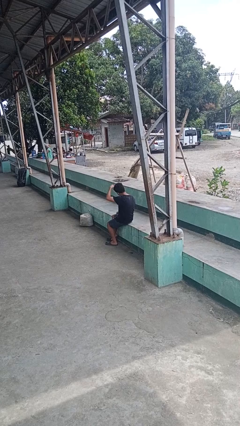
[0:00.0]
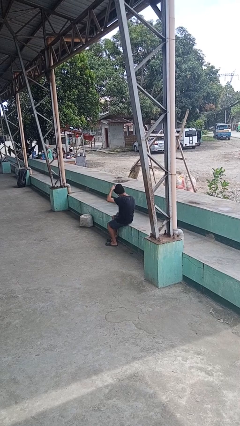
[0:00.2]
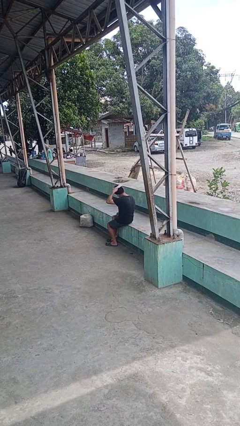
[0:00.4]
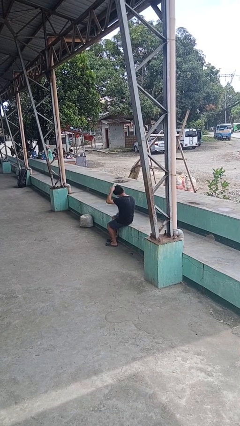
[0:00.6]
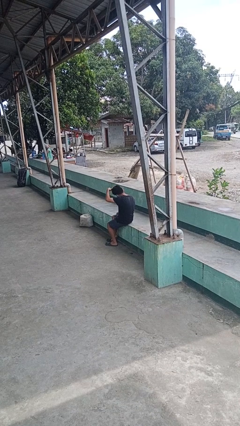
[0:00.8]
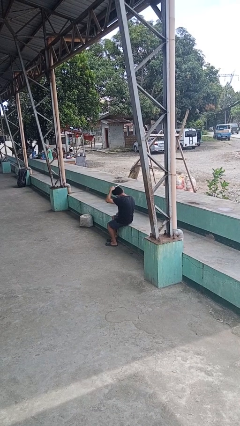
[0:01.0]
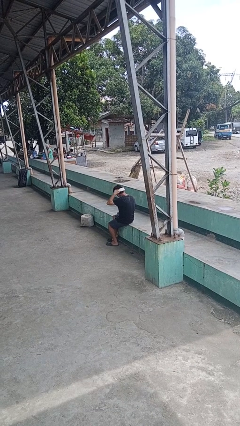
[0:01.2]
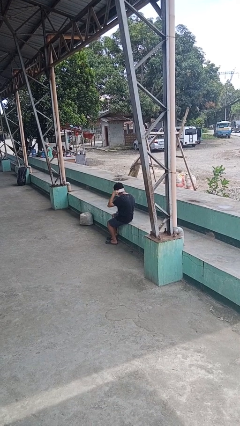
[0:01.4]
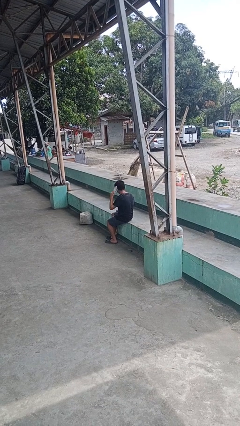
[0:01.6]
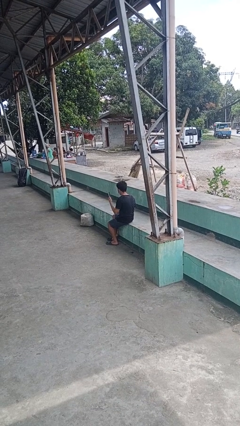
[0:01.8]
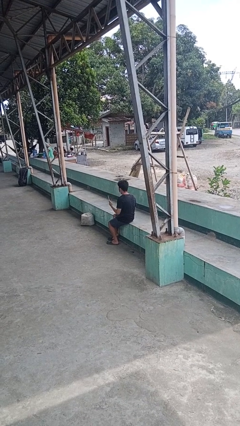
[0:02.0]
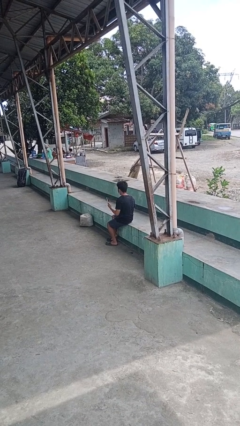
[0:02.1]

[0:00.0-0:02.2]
person brushes hair

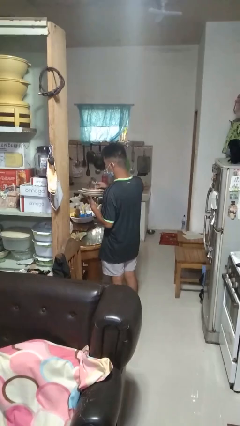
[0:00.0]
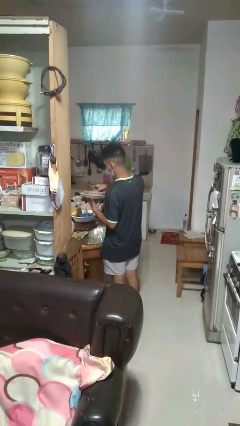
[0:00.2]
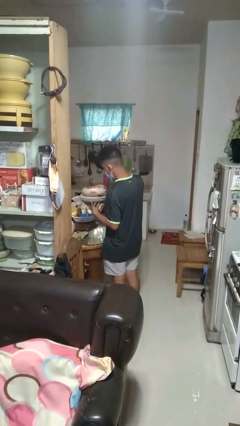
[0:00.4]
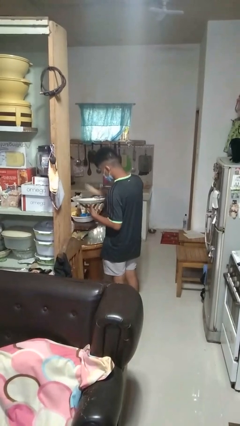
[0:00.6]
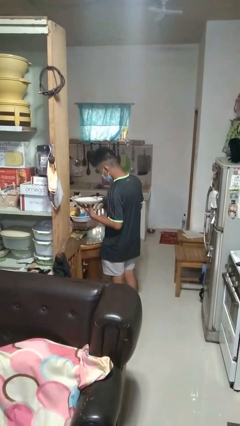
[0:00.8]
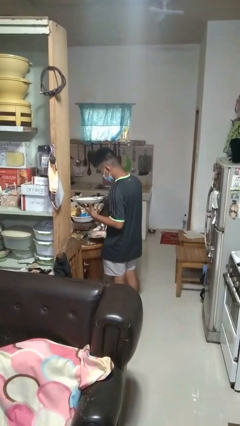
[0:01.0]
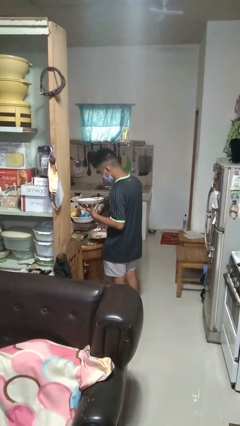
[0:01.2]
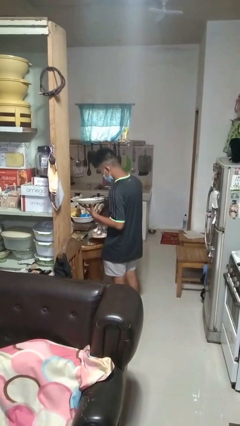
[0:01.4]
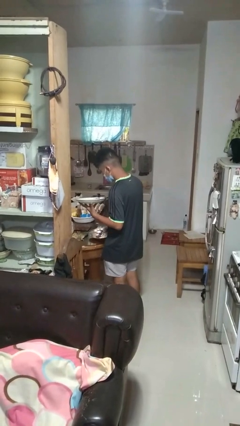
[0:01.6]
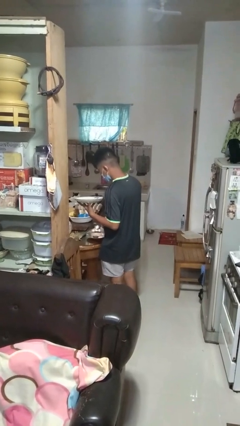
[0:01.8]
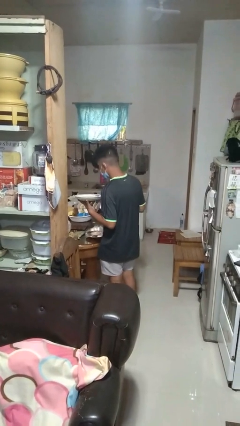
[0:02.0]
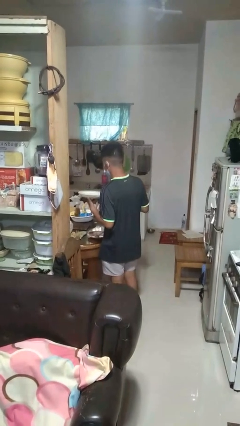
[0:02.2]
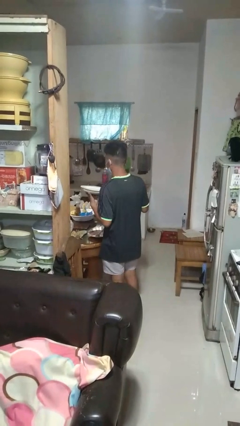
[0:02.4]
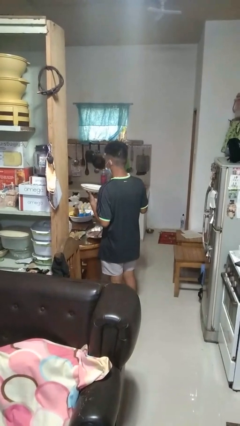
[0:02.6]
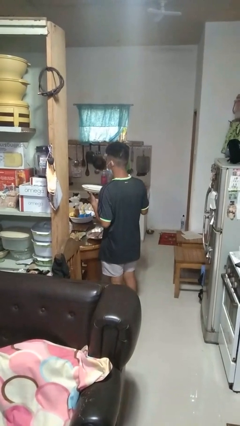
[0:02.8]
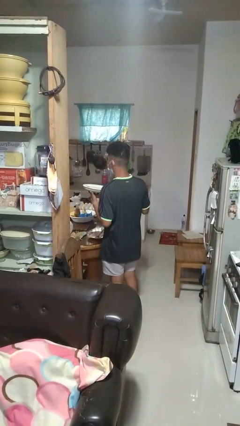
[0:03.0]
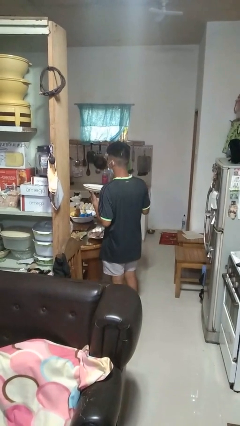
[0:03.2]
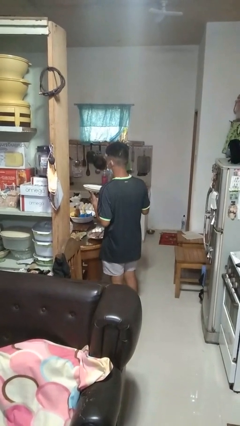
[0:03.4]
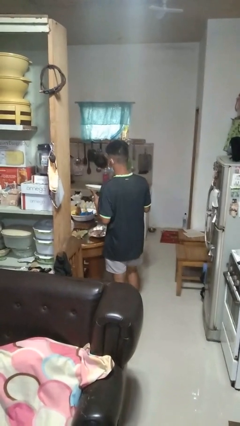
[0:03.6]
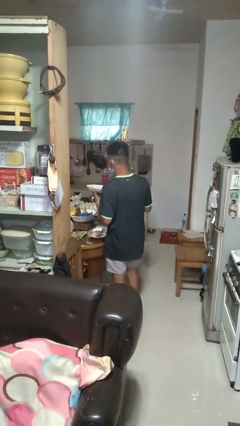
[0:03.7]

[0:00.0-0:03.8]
person sets table

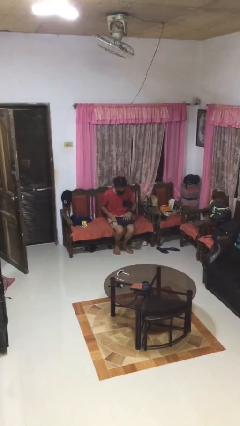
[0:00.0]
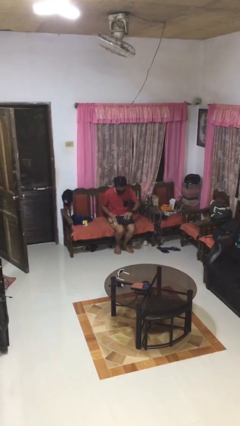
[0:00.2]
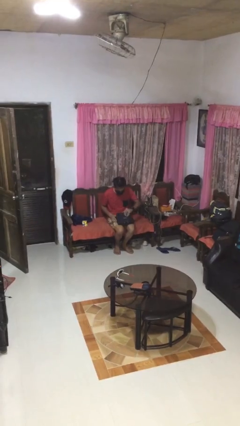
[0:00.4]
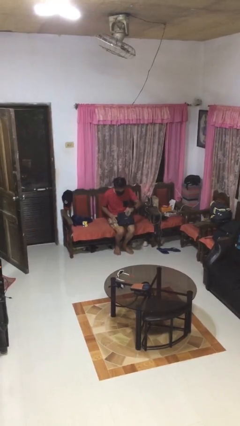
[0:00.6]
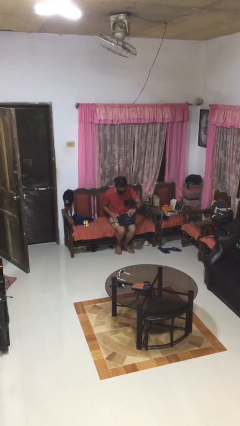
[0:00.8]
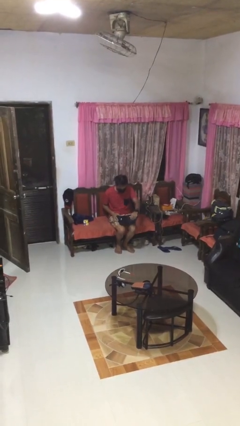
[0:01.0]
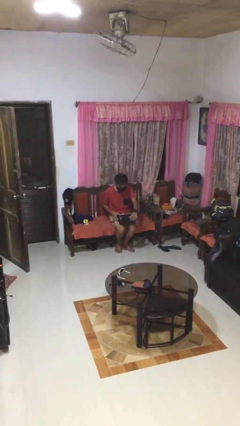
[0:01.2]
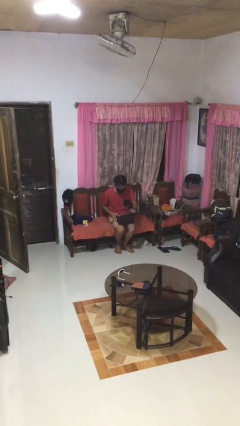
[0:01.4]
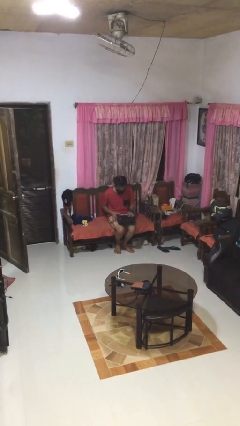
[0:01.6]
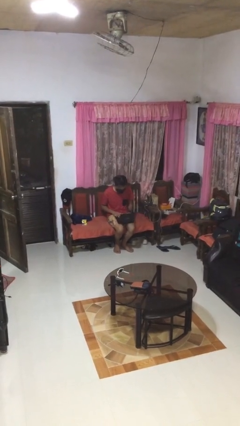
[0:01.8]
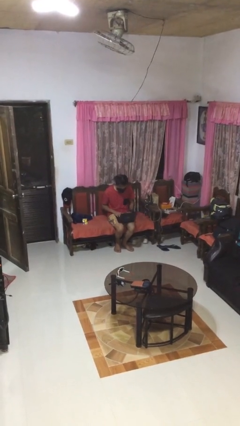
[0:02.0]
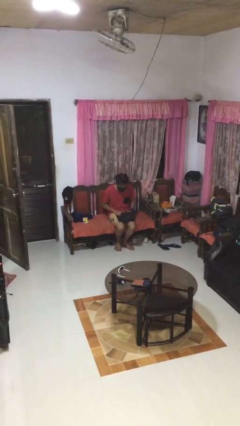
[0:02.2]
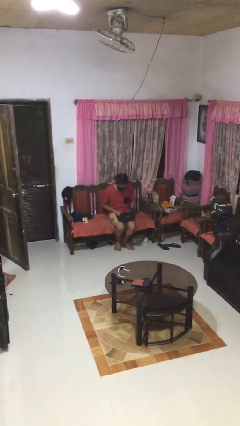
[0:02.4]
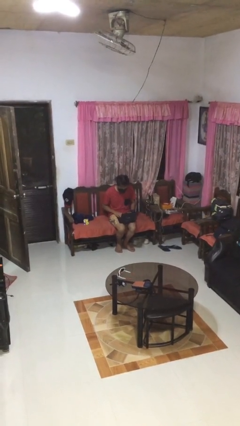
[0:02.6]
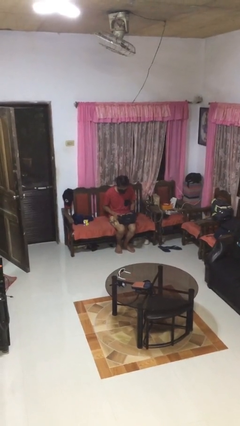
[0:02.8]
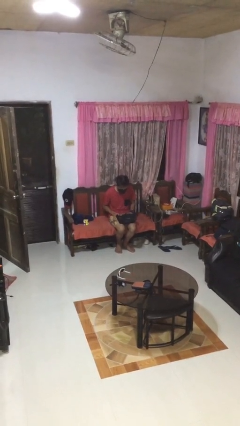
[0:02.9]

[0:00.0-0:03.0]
person opens laptop

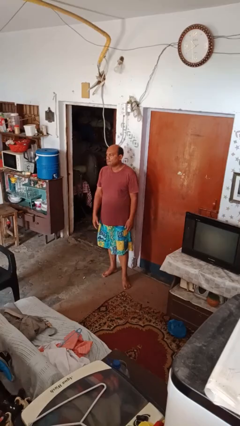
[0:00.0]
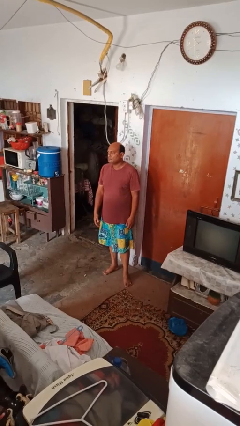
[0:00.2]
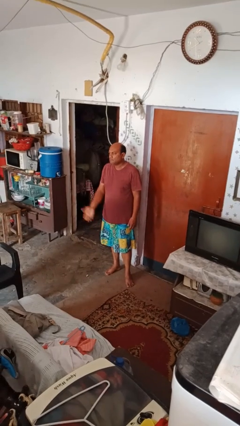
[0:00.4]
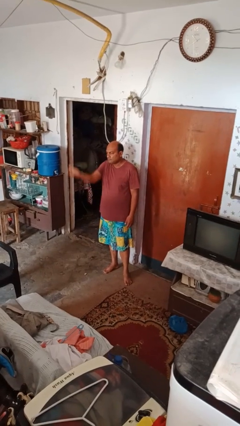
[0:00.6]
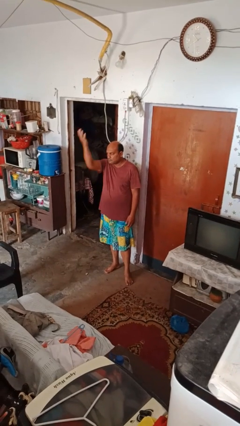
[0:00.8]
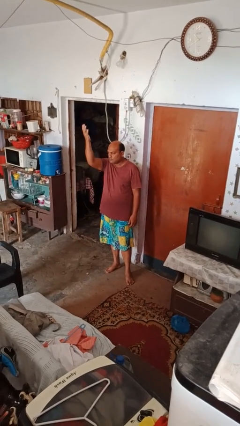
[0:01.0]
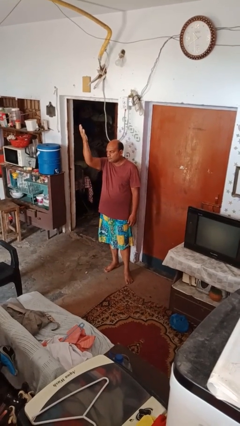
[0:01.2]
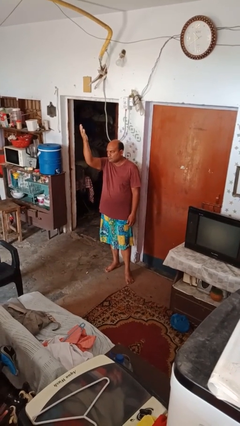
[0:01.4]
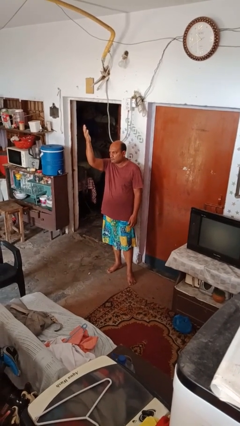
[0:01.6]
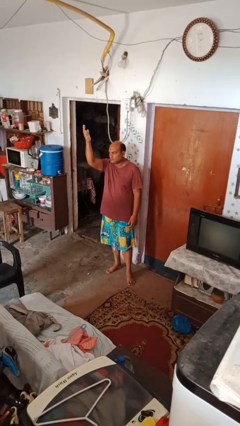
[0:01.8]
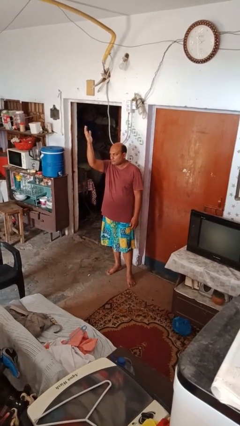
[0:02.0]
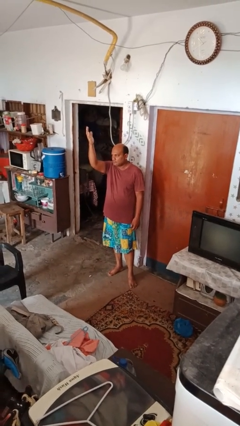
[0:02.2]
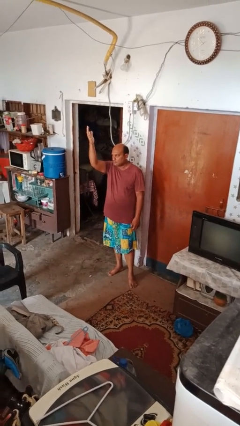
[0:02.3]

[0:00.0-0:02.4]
person gestures raise hand

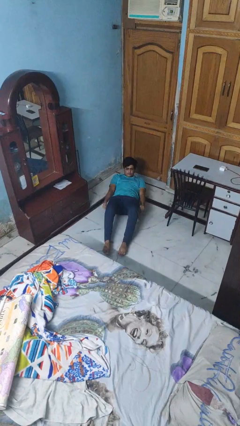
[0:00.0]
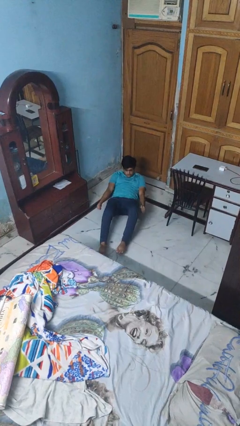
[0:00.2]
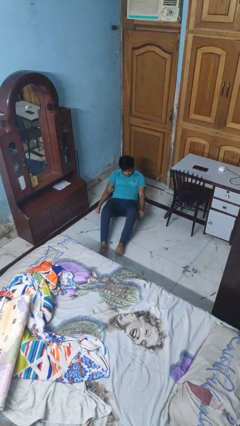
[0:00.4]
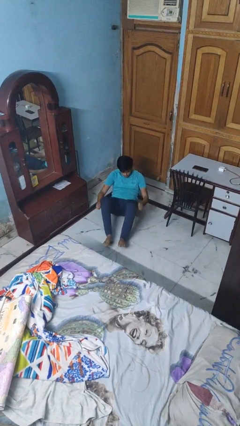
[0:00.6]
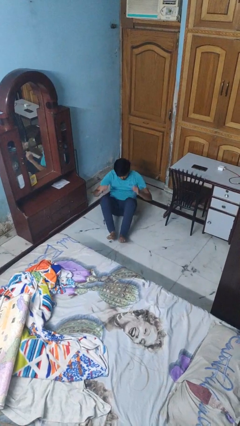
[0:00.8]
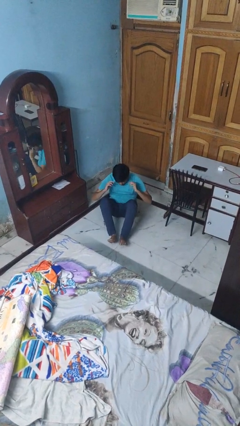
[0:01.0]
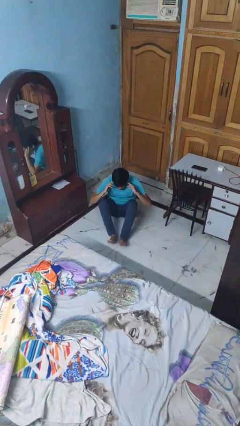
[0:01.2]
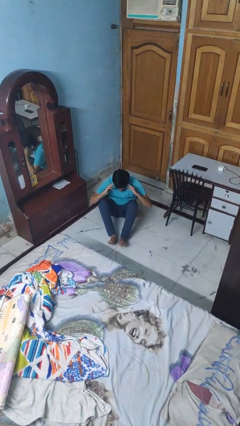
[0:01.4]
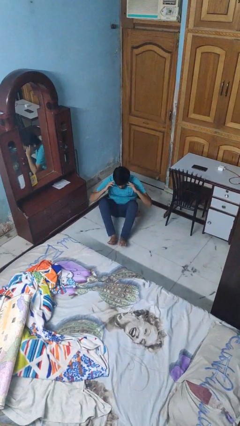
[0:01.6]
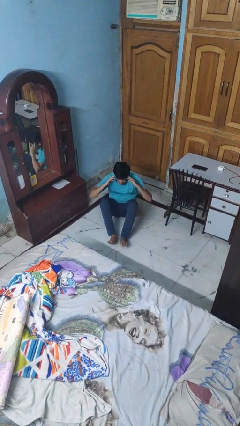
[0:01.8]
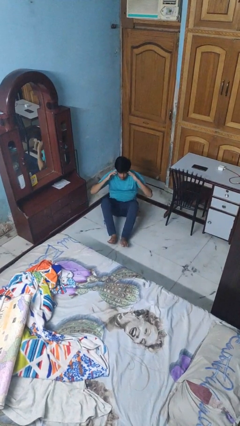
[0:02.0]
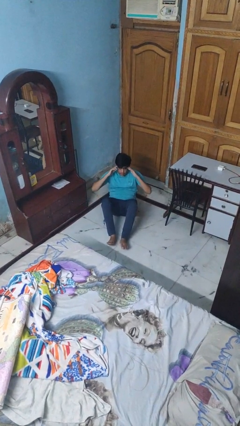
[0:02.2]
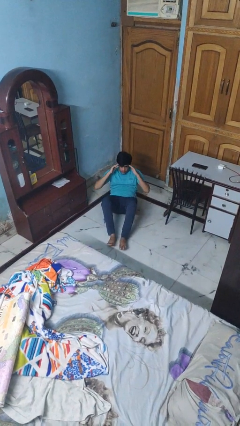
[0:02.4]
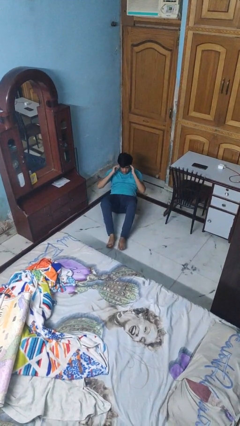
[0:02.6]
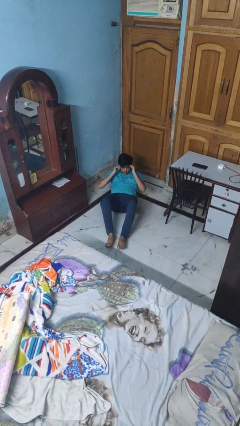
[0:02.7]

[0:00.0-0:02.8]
person exercises with situp

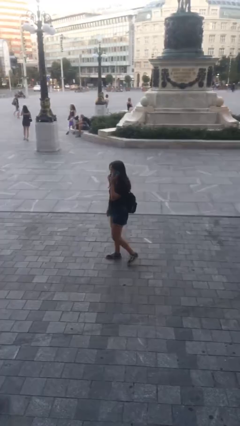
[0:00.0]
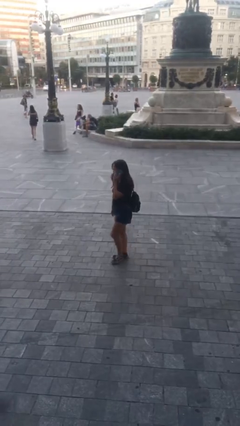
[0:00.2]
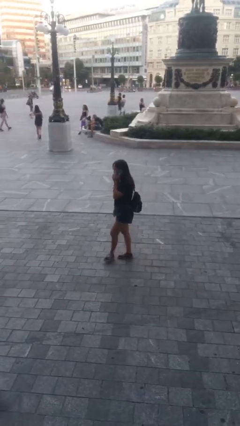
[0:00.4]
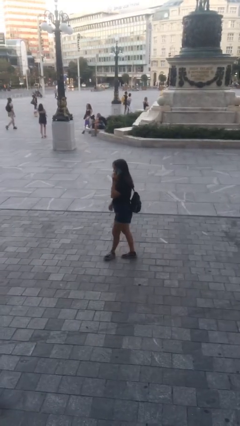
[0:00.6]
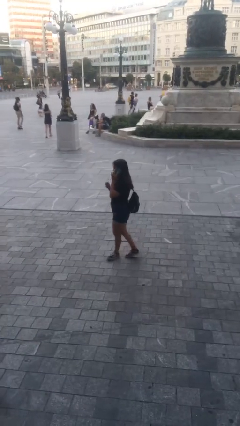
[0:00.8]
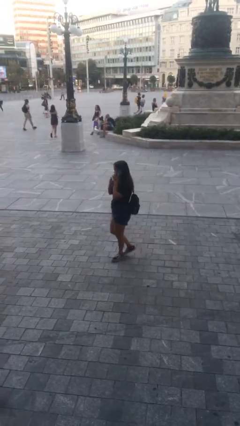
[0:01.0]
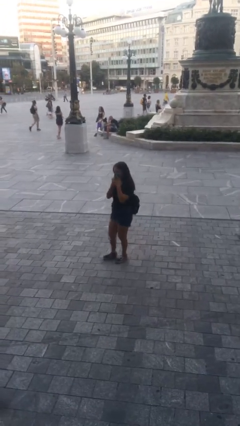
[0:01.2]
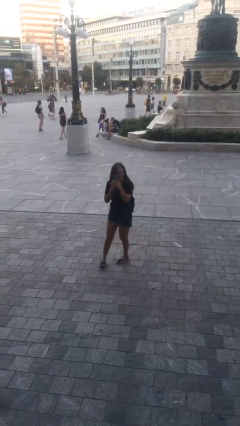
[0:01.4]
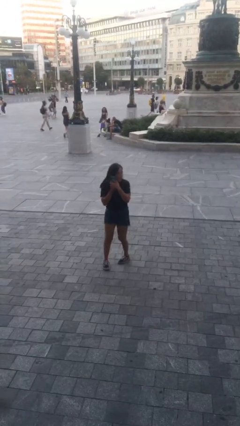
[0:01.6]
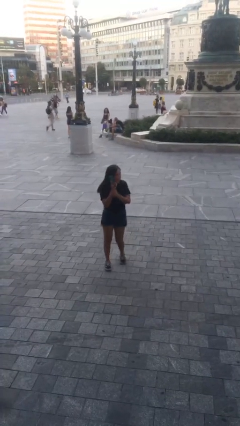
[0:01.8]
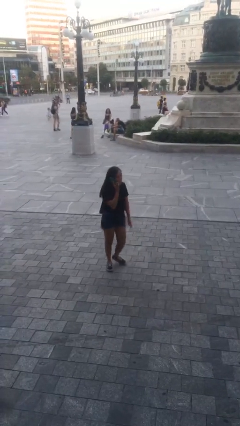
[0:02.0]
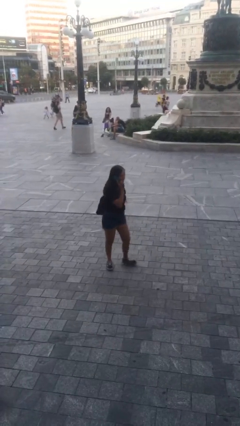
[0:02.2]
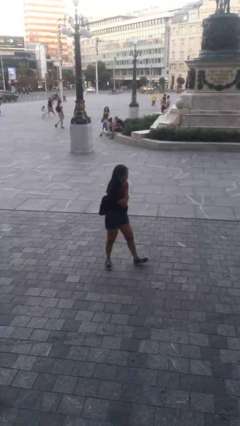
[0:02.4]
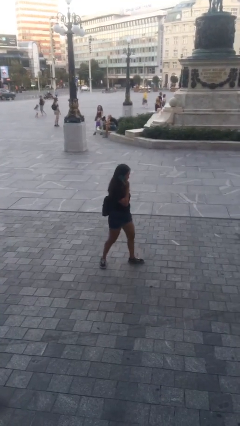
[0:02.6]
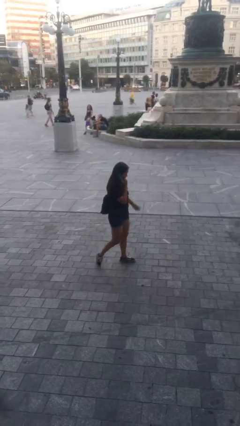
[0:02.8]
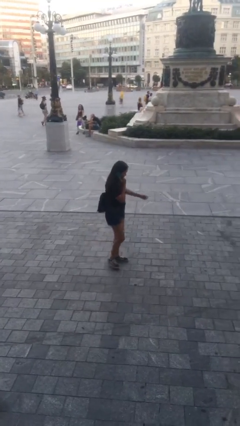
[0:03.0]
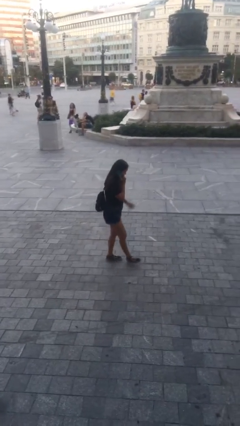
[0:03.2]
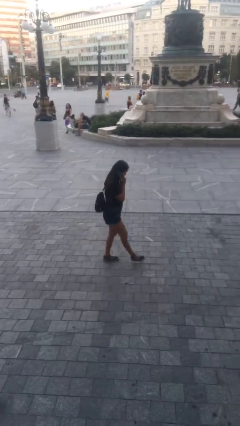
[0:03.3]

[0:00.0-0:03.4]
person talks on phone

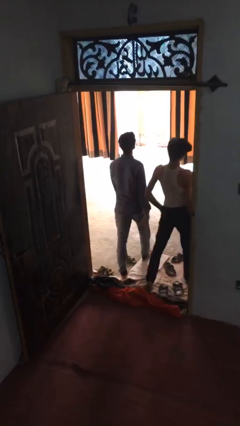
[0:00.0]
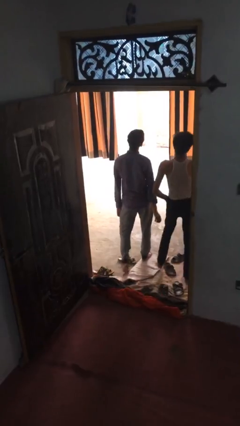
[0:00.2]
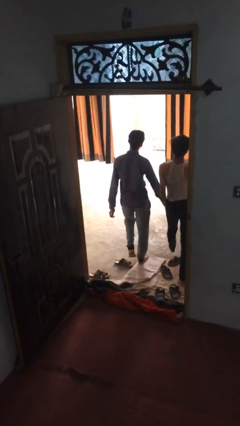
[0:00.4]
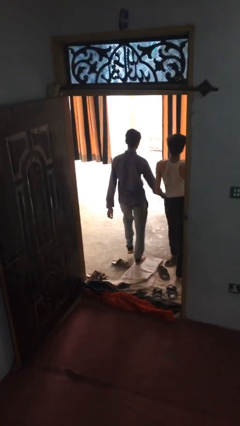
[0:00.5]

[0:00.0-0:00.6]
person talks to person
